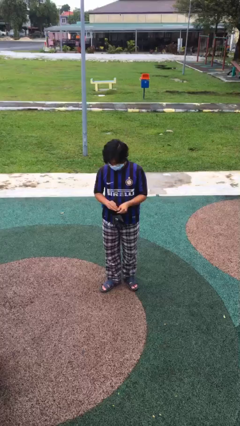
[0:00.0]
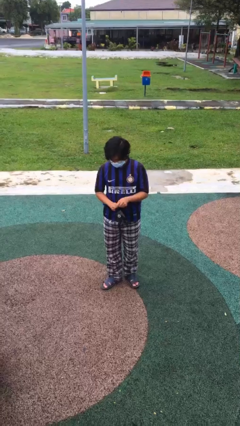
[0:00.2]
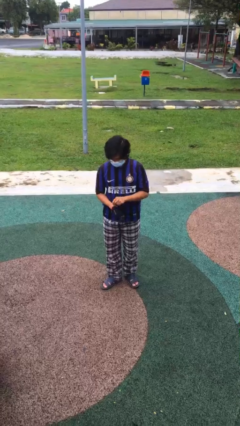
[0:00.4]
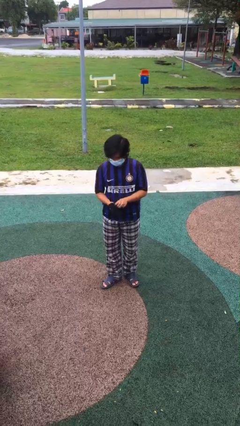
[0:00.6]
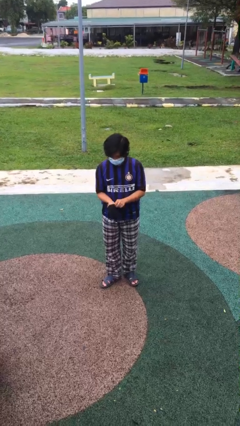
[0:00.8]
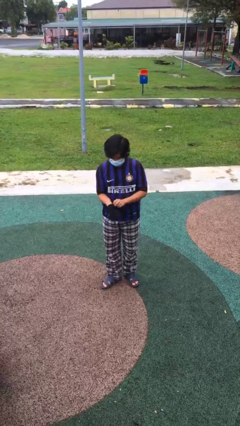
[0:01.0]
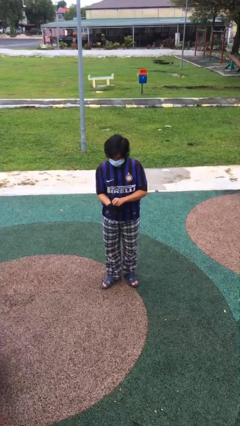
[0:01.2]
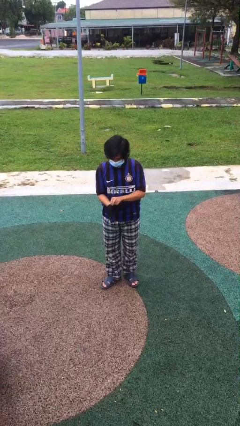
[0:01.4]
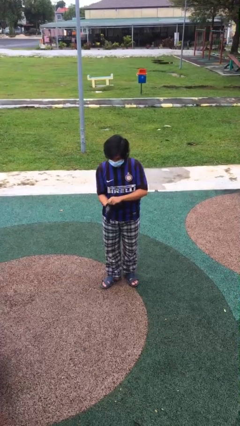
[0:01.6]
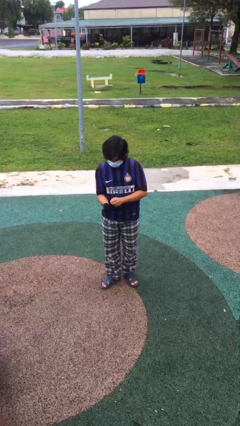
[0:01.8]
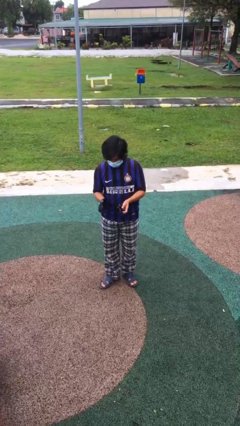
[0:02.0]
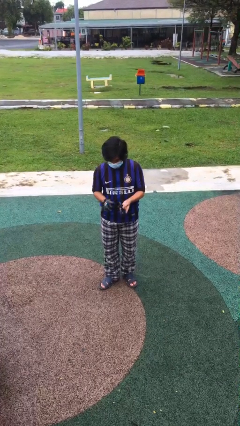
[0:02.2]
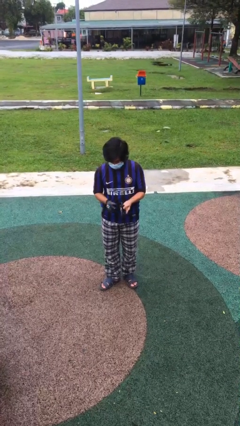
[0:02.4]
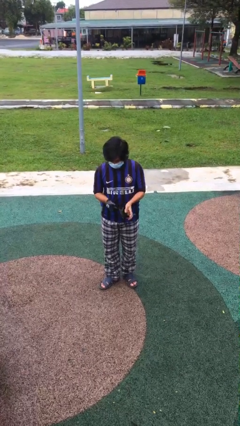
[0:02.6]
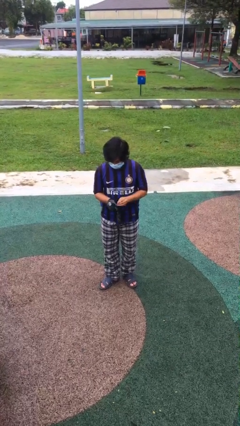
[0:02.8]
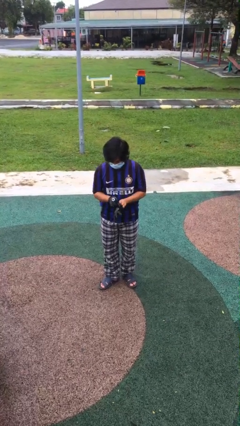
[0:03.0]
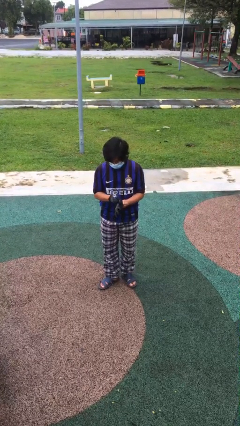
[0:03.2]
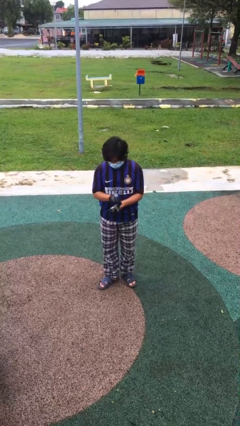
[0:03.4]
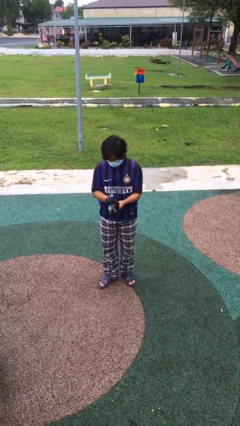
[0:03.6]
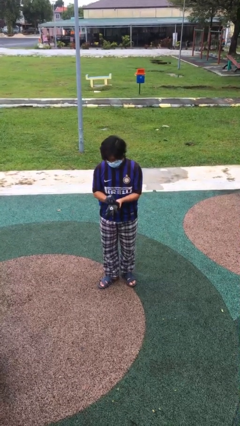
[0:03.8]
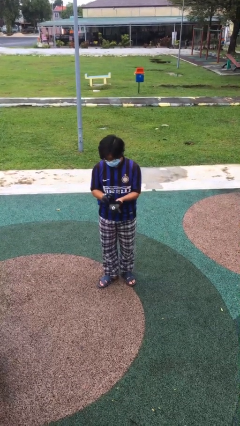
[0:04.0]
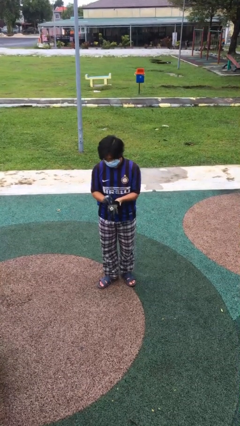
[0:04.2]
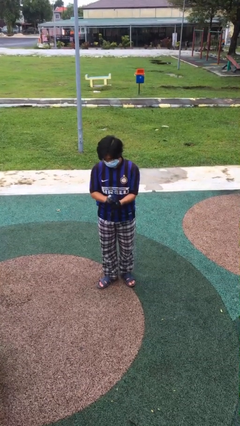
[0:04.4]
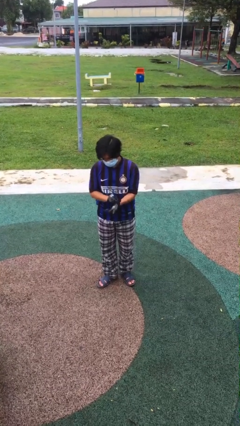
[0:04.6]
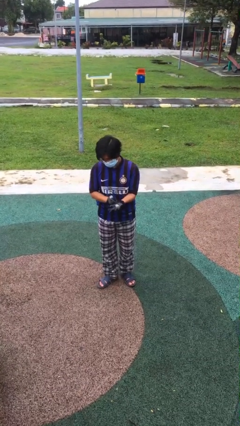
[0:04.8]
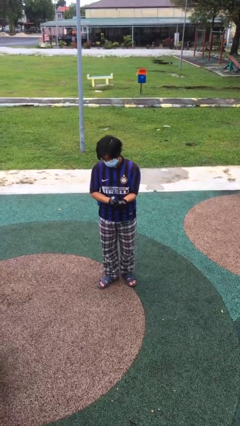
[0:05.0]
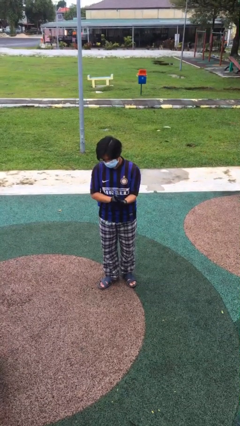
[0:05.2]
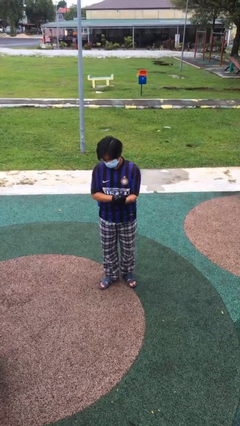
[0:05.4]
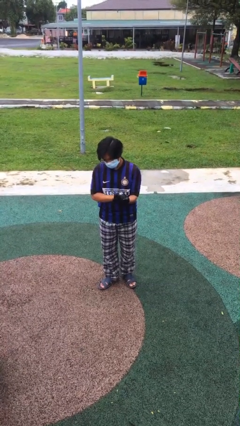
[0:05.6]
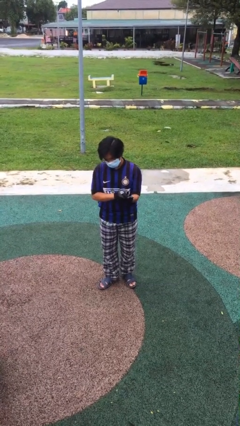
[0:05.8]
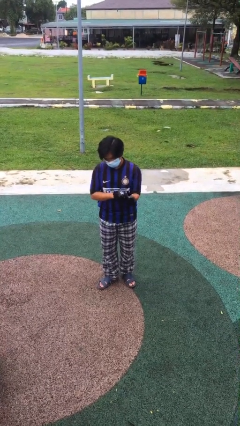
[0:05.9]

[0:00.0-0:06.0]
person puts on gloves

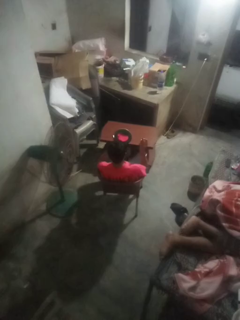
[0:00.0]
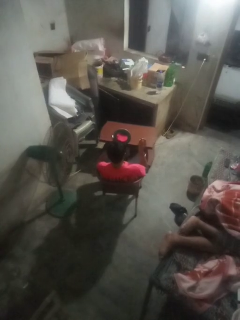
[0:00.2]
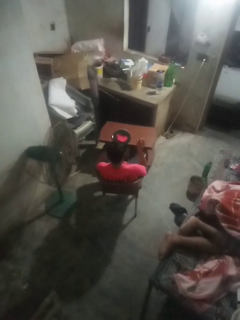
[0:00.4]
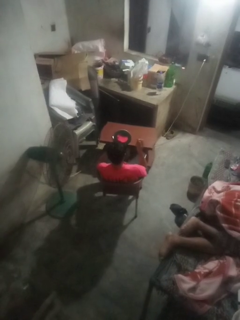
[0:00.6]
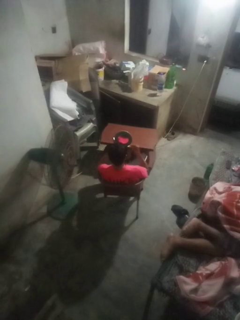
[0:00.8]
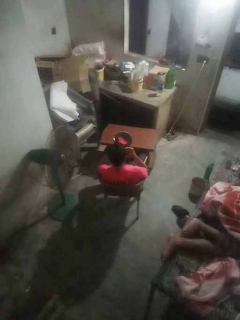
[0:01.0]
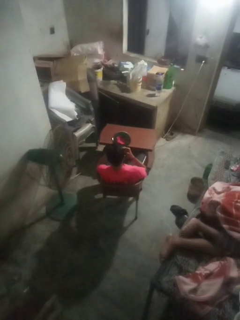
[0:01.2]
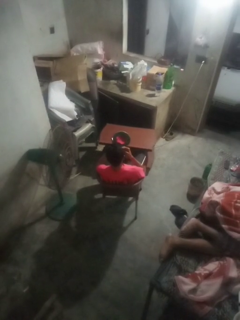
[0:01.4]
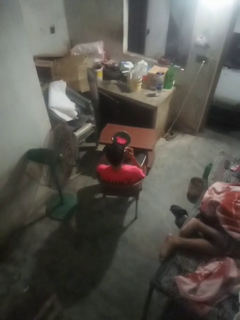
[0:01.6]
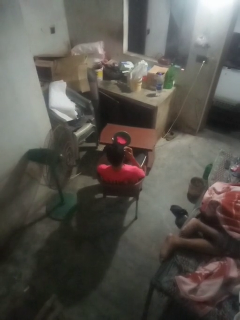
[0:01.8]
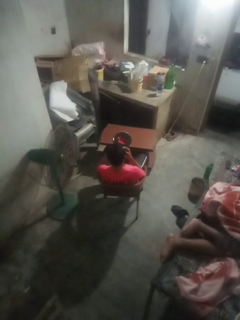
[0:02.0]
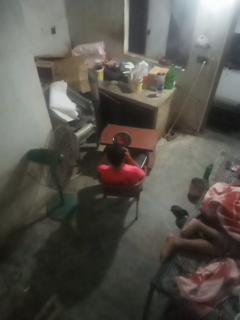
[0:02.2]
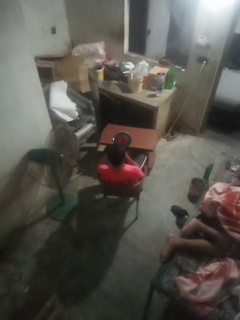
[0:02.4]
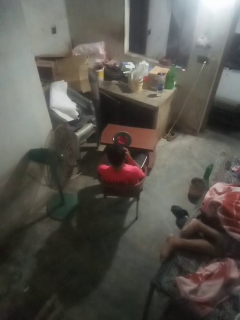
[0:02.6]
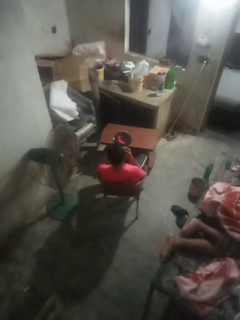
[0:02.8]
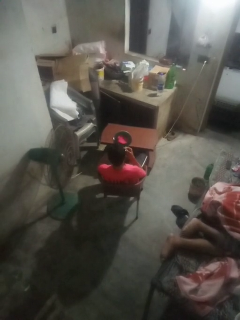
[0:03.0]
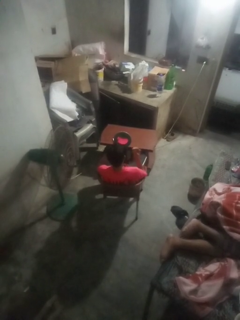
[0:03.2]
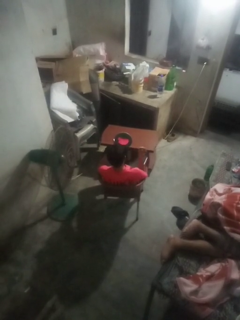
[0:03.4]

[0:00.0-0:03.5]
person applies lip makeup

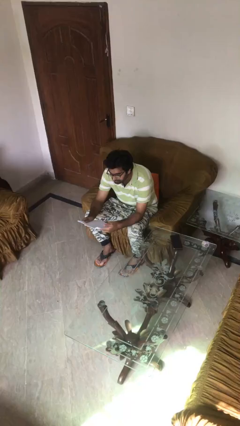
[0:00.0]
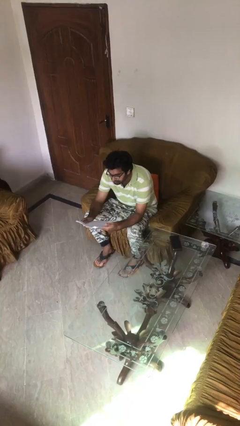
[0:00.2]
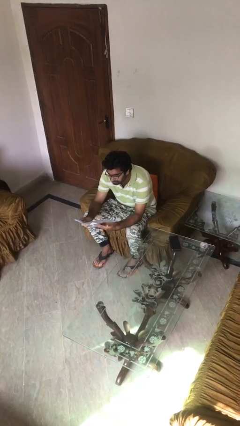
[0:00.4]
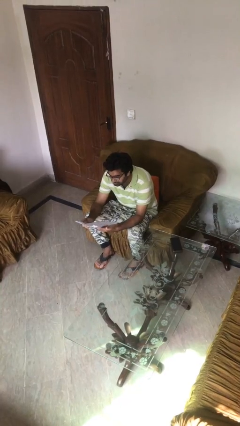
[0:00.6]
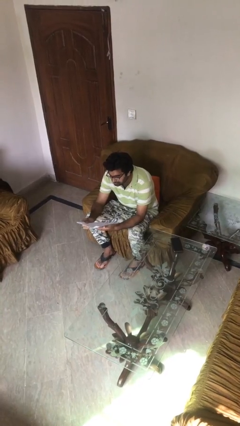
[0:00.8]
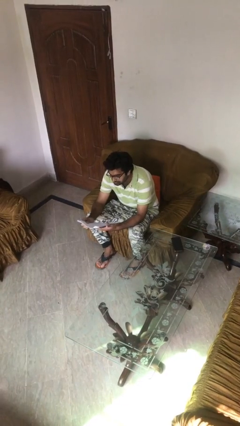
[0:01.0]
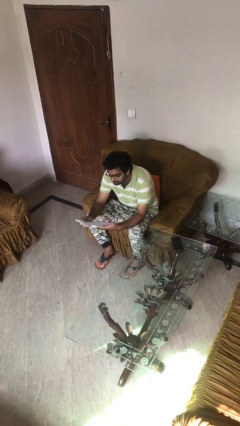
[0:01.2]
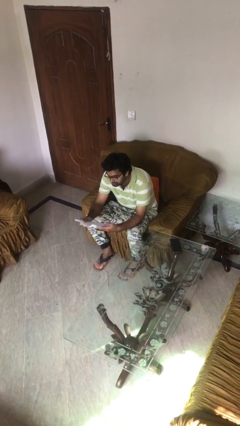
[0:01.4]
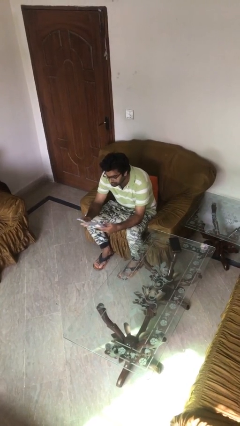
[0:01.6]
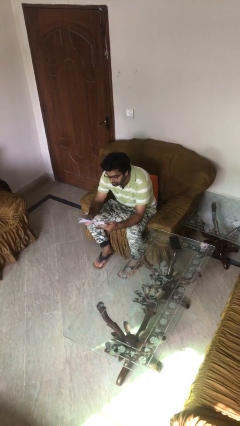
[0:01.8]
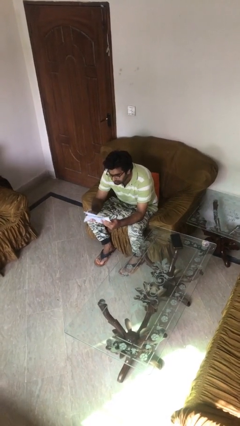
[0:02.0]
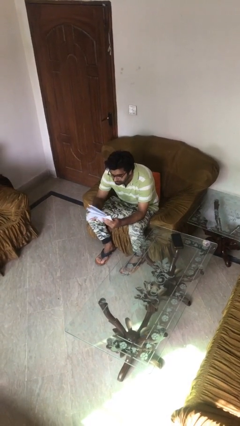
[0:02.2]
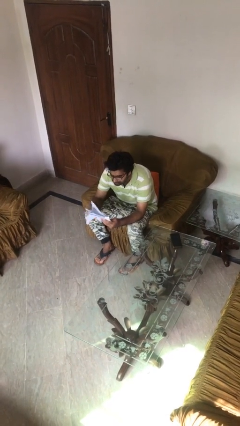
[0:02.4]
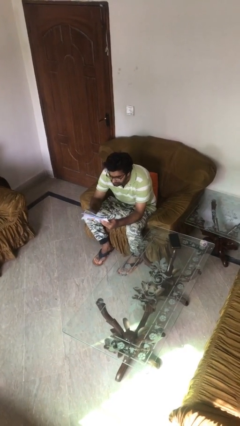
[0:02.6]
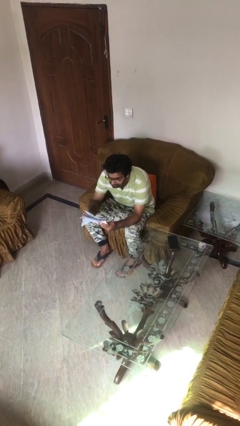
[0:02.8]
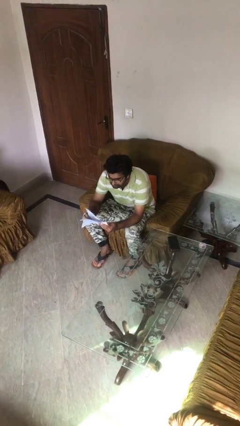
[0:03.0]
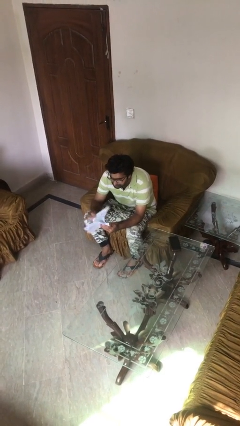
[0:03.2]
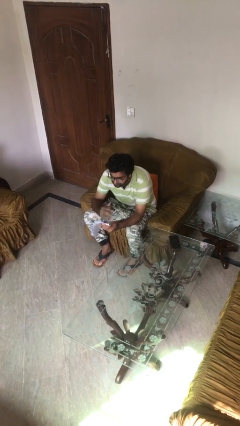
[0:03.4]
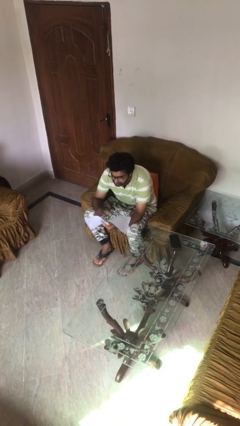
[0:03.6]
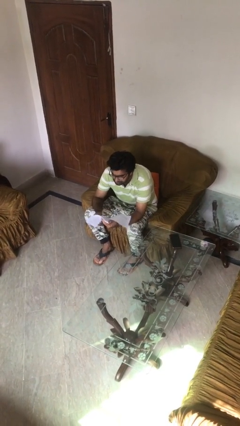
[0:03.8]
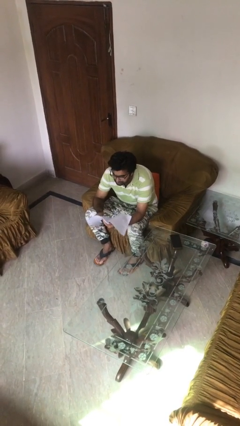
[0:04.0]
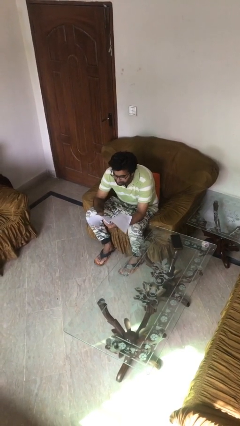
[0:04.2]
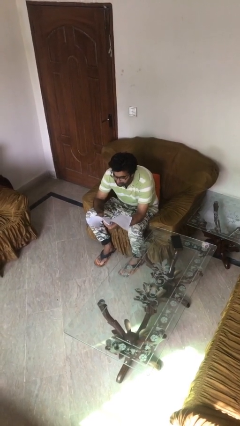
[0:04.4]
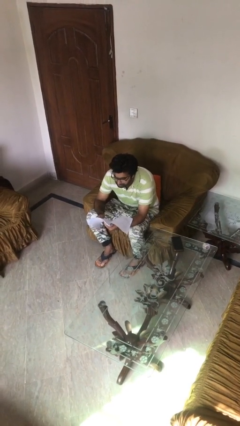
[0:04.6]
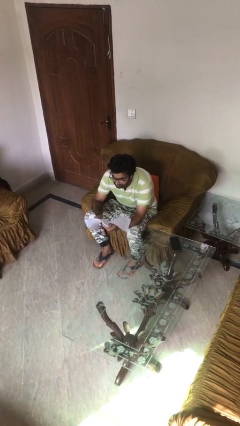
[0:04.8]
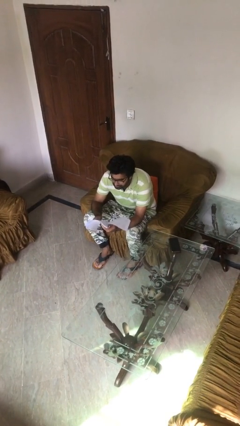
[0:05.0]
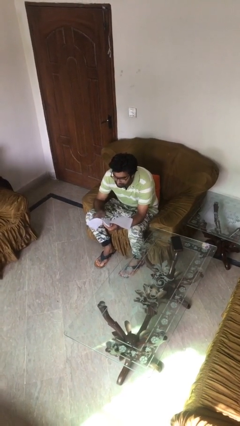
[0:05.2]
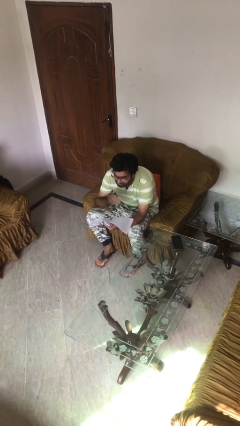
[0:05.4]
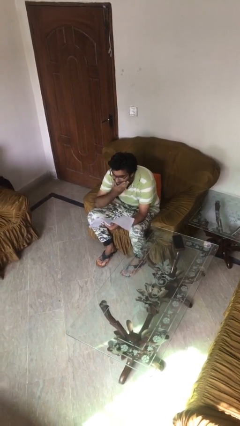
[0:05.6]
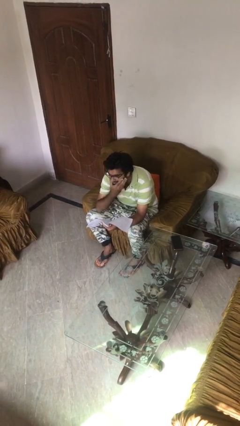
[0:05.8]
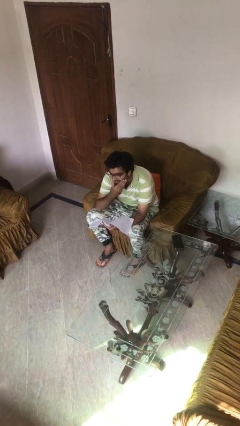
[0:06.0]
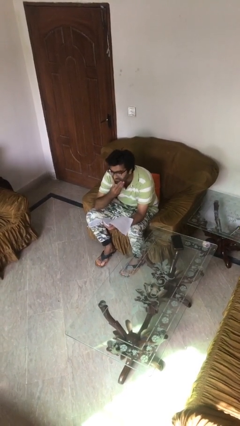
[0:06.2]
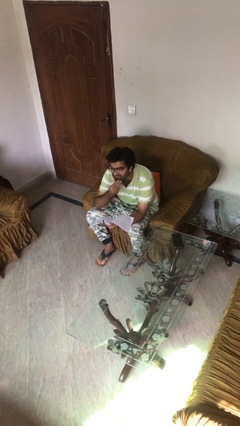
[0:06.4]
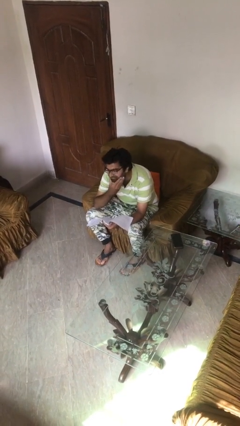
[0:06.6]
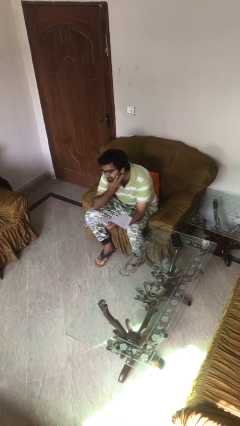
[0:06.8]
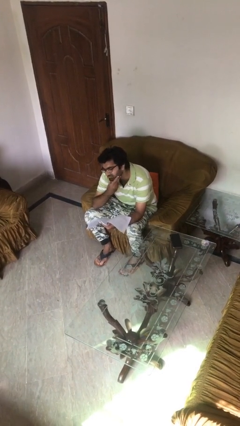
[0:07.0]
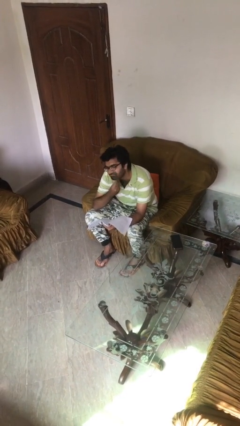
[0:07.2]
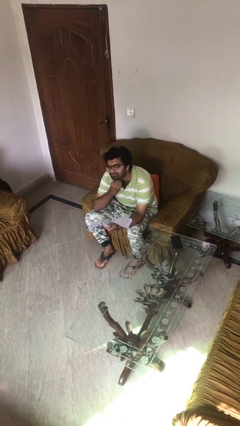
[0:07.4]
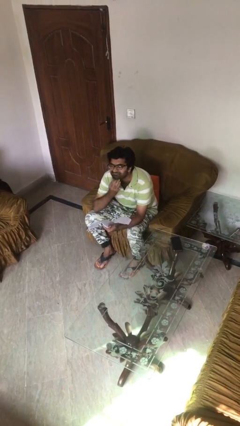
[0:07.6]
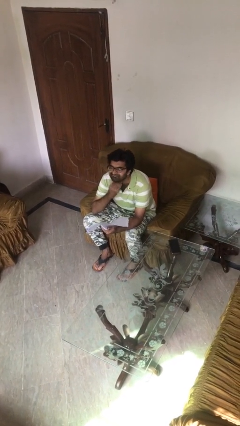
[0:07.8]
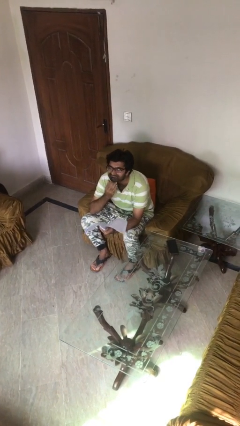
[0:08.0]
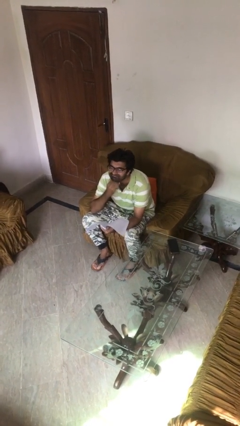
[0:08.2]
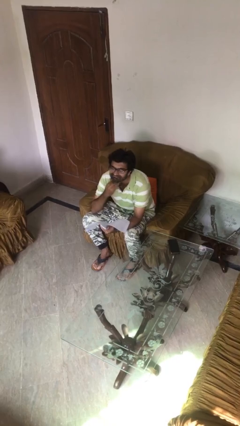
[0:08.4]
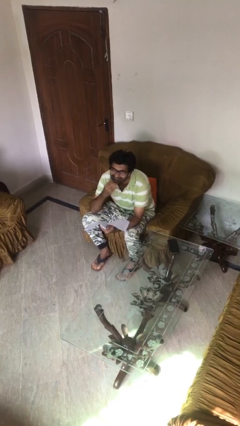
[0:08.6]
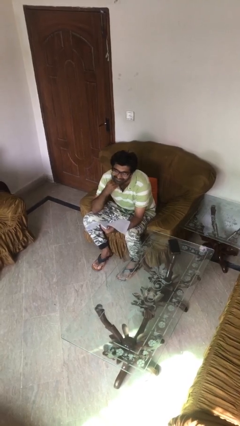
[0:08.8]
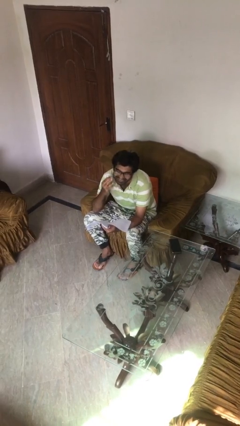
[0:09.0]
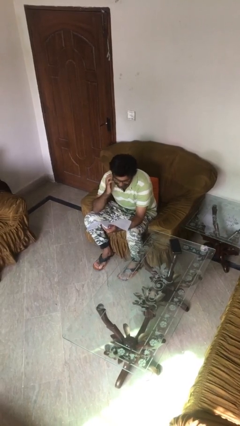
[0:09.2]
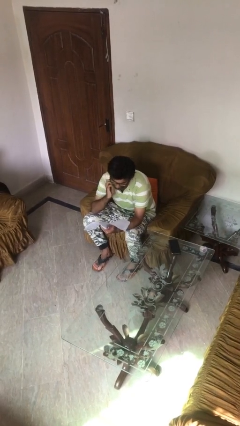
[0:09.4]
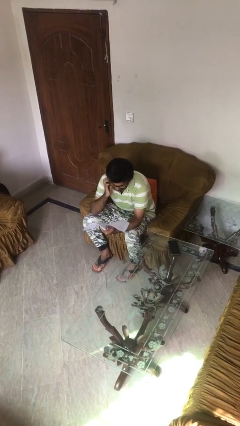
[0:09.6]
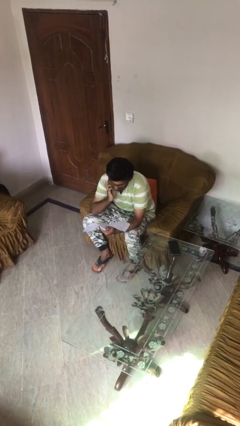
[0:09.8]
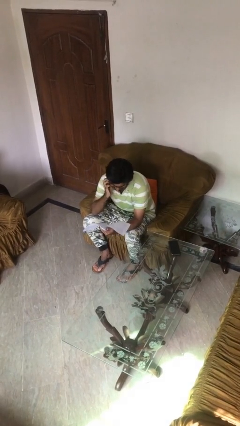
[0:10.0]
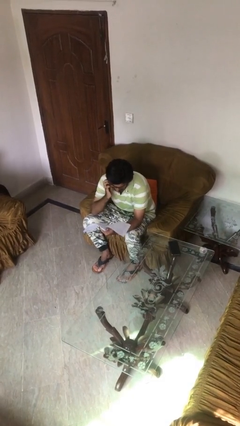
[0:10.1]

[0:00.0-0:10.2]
person reads document
